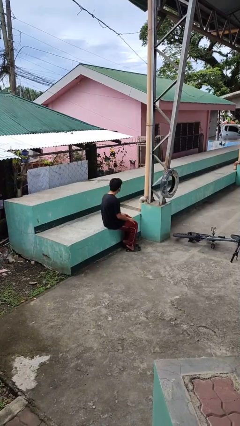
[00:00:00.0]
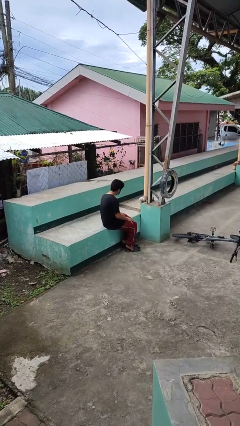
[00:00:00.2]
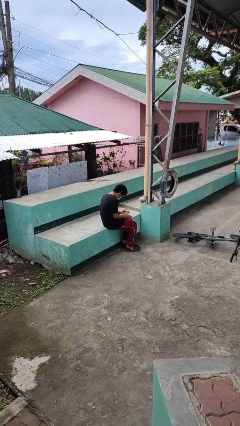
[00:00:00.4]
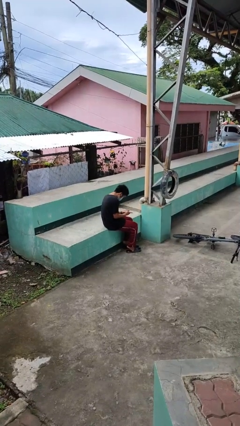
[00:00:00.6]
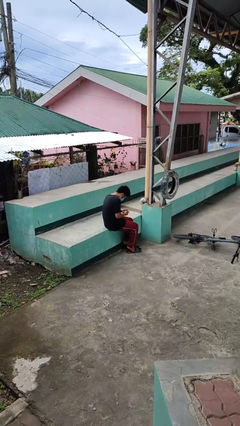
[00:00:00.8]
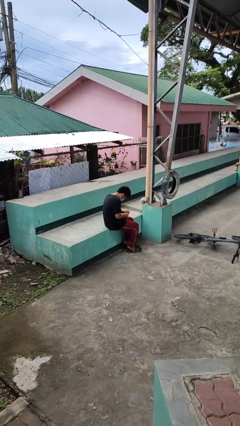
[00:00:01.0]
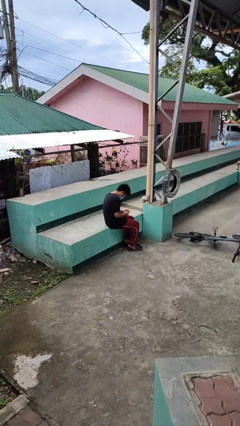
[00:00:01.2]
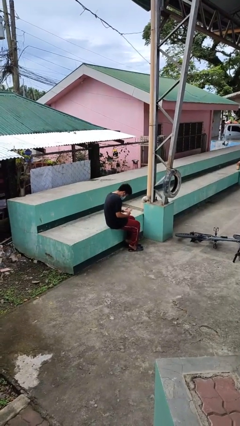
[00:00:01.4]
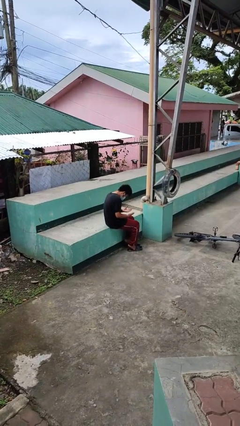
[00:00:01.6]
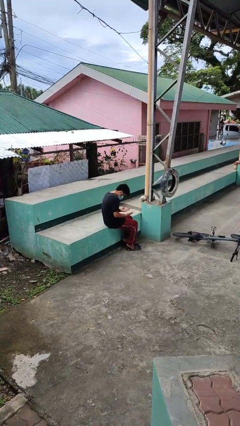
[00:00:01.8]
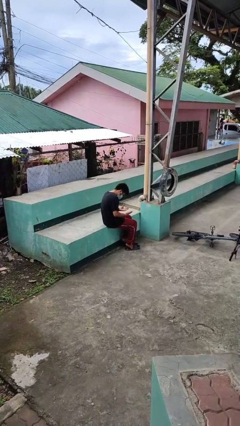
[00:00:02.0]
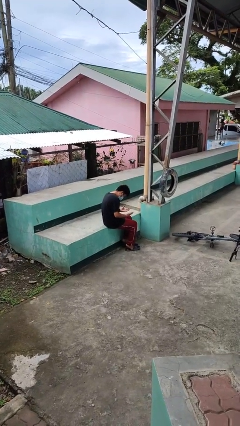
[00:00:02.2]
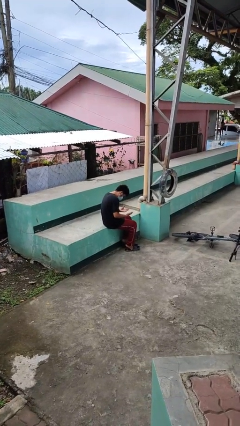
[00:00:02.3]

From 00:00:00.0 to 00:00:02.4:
person looks at hands in lap

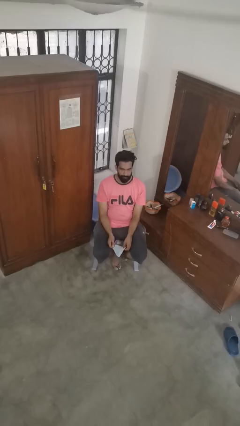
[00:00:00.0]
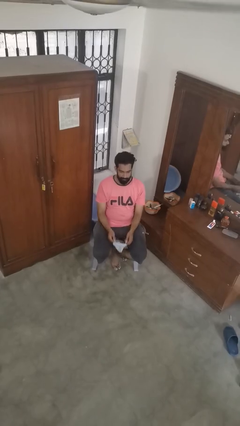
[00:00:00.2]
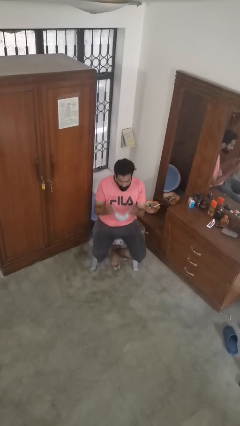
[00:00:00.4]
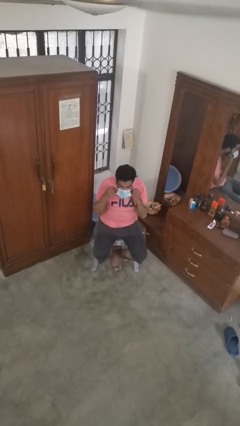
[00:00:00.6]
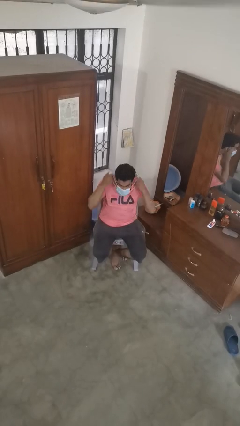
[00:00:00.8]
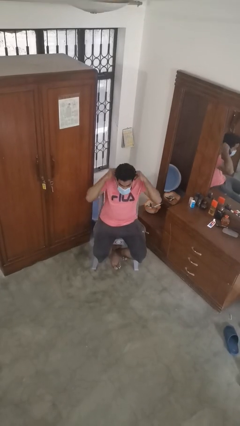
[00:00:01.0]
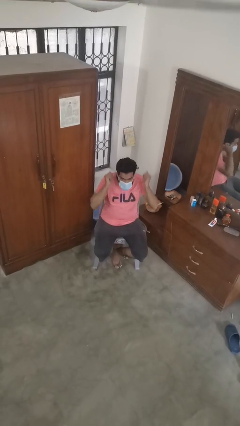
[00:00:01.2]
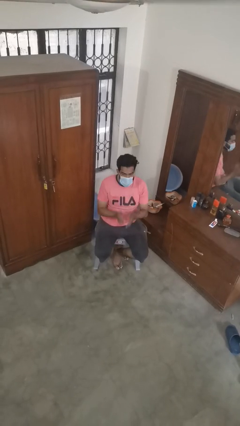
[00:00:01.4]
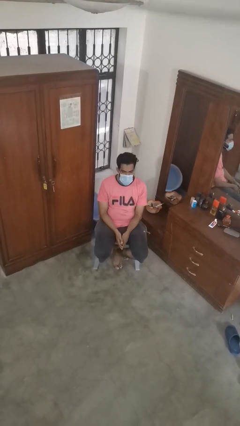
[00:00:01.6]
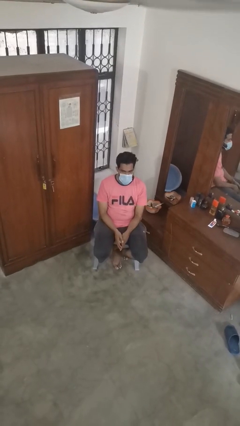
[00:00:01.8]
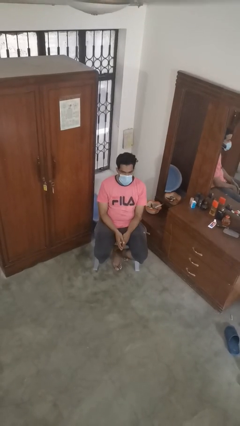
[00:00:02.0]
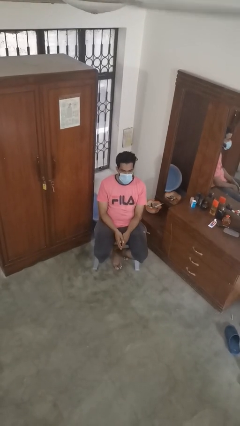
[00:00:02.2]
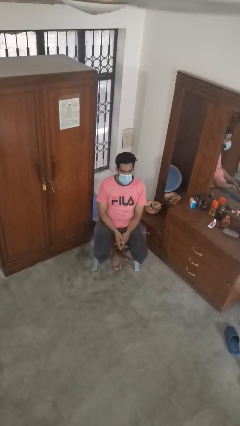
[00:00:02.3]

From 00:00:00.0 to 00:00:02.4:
person puts on facemask

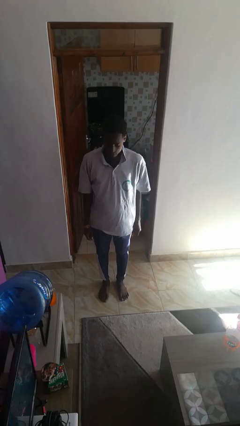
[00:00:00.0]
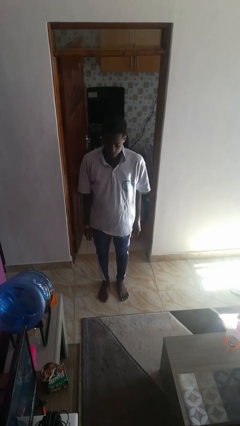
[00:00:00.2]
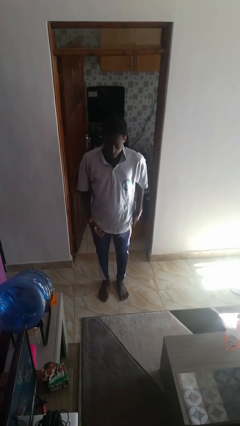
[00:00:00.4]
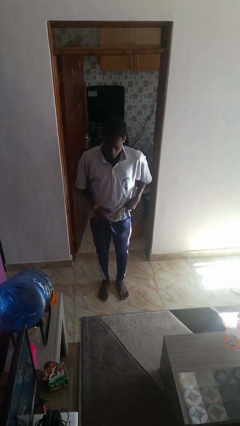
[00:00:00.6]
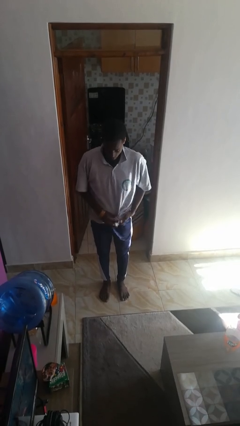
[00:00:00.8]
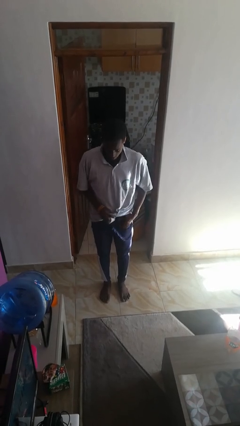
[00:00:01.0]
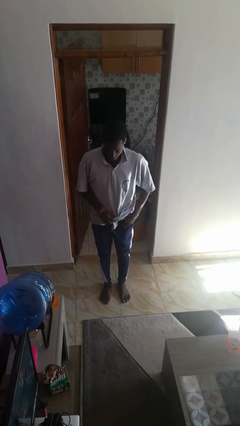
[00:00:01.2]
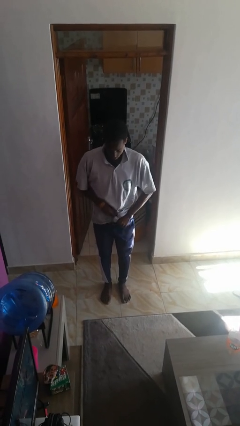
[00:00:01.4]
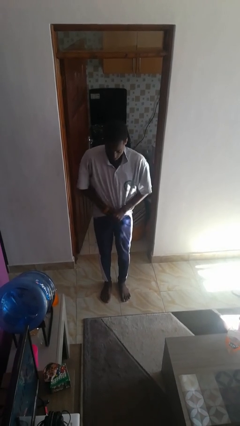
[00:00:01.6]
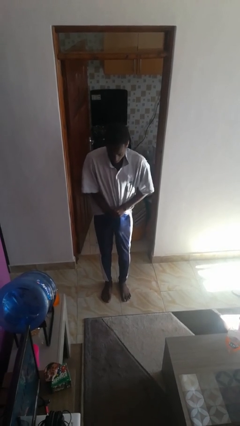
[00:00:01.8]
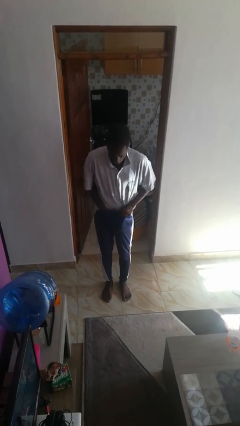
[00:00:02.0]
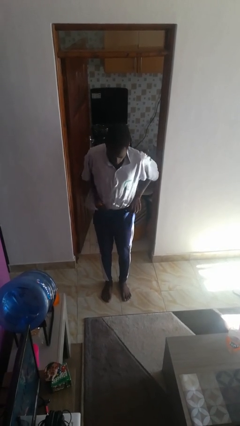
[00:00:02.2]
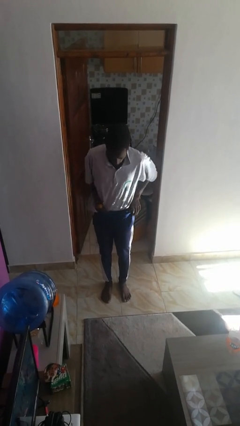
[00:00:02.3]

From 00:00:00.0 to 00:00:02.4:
person tucks in shirt

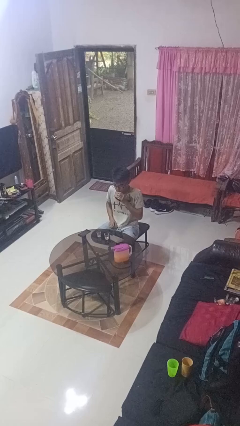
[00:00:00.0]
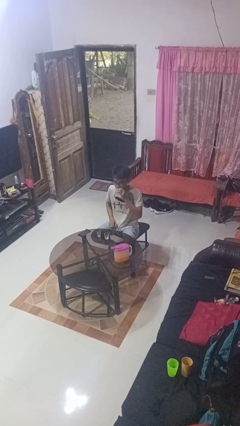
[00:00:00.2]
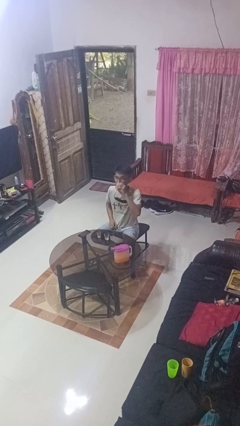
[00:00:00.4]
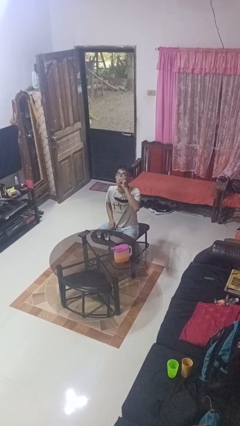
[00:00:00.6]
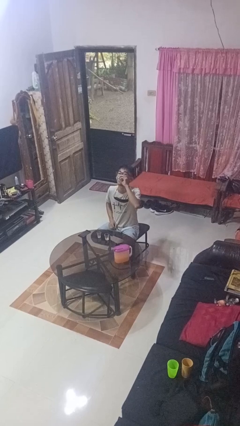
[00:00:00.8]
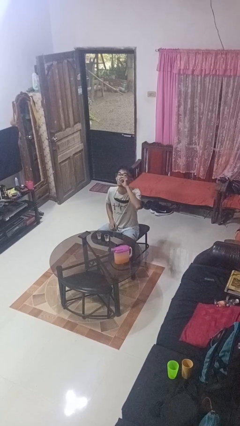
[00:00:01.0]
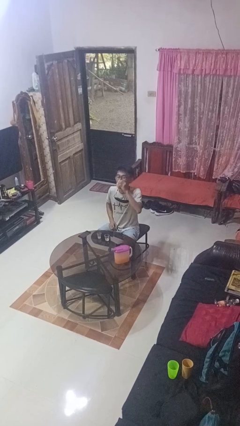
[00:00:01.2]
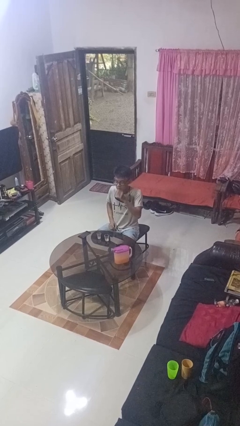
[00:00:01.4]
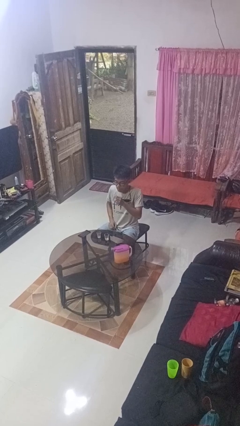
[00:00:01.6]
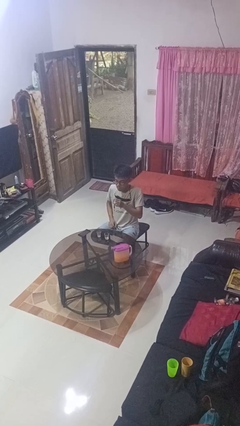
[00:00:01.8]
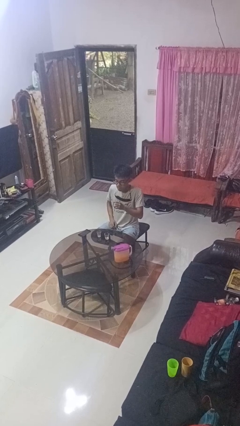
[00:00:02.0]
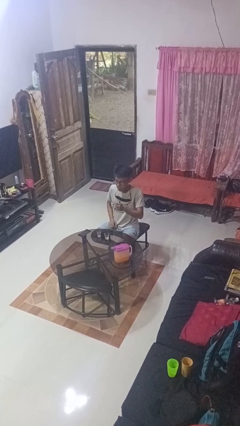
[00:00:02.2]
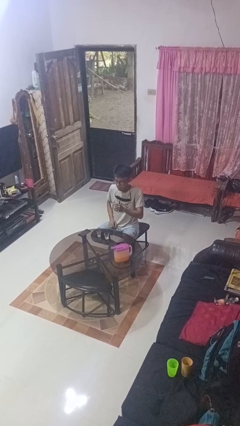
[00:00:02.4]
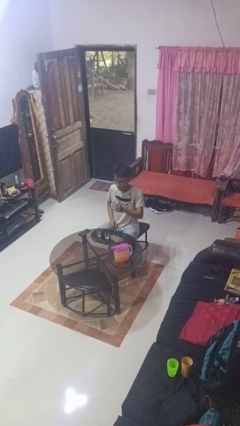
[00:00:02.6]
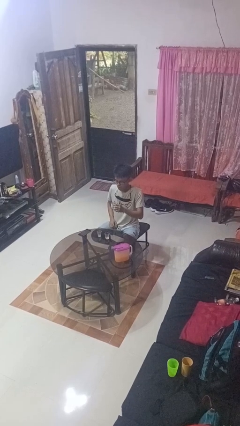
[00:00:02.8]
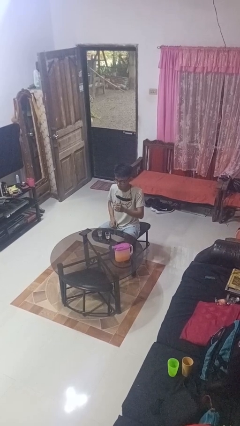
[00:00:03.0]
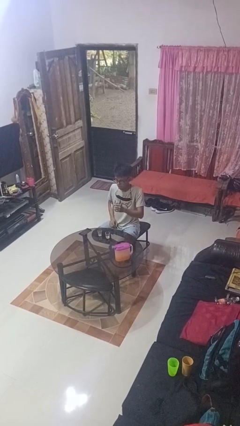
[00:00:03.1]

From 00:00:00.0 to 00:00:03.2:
person drinks from shotglass

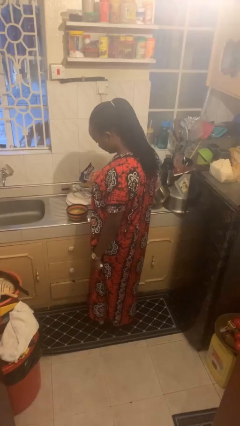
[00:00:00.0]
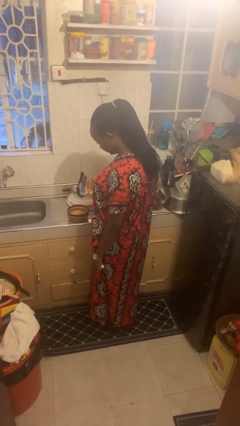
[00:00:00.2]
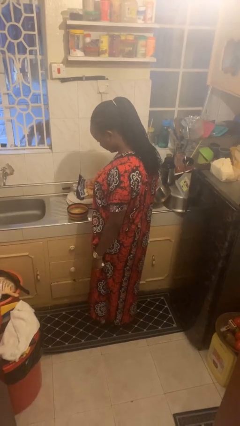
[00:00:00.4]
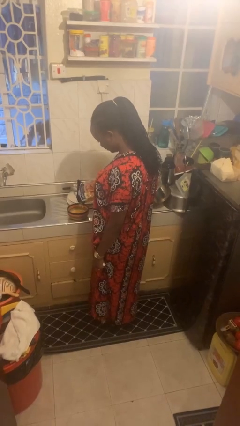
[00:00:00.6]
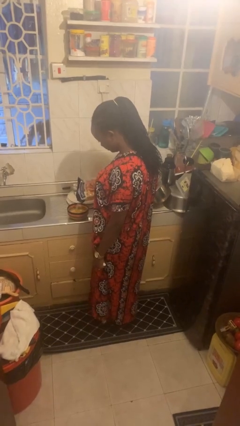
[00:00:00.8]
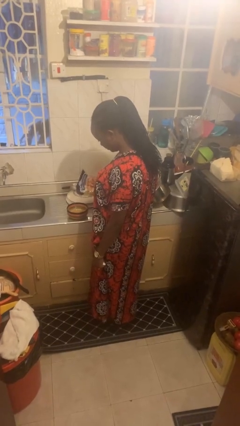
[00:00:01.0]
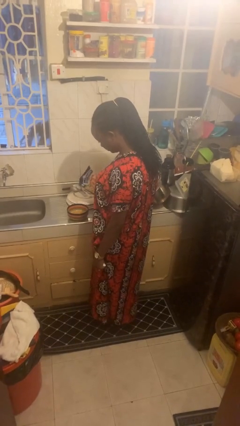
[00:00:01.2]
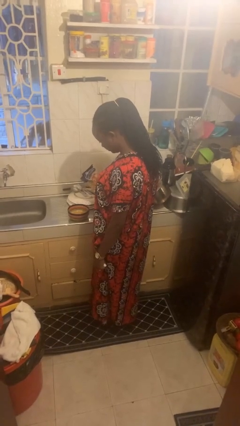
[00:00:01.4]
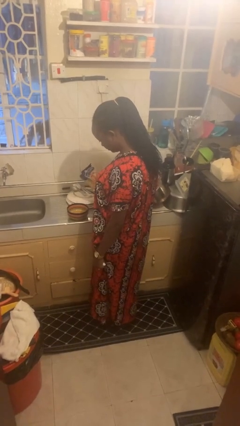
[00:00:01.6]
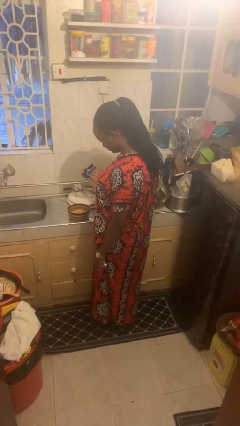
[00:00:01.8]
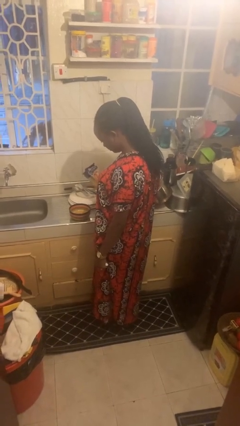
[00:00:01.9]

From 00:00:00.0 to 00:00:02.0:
person pours into bowl

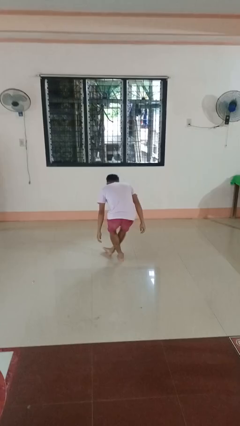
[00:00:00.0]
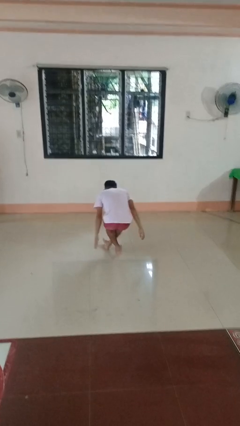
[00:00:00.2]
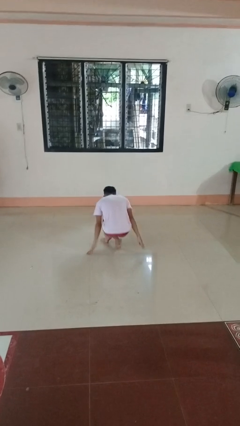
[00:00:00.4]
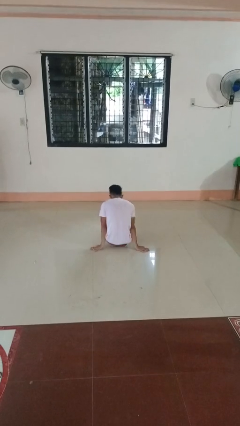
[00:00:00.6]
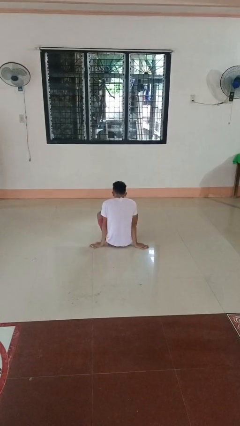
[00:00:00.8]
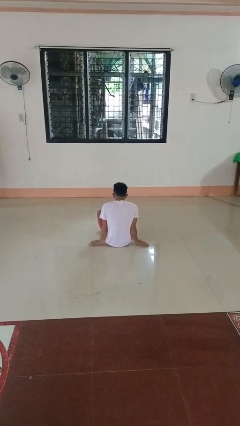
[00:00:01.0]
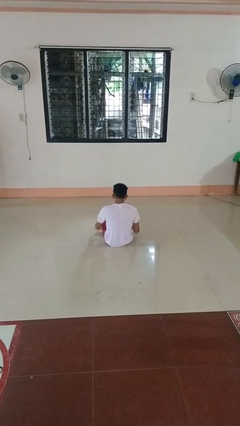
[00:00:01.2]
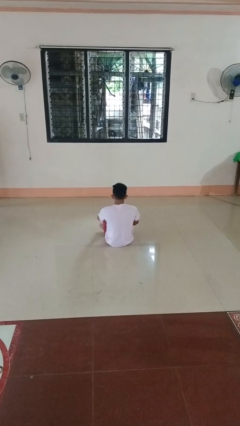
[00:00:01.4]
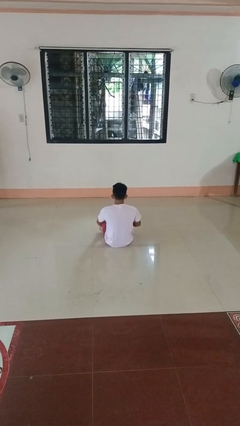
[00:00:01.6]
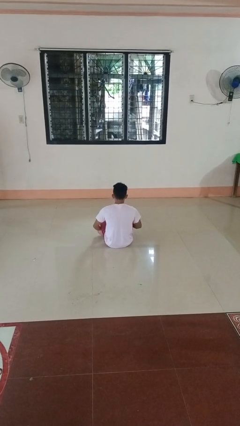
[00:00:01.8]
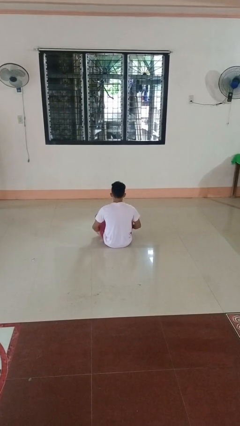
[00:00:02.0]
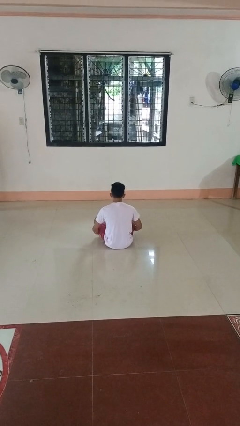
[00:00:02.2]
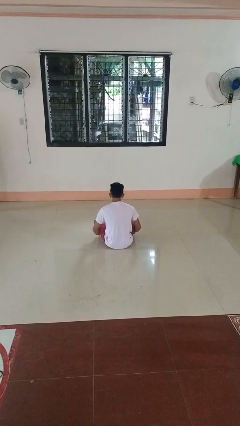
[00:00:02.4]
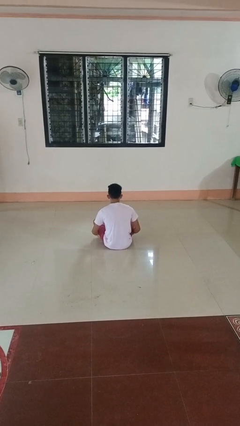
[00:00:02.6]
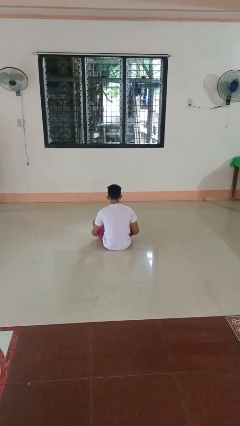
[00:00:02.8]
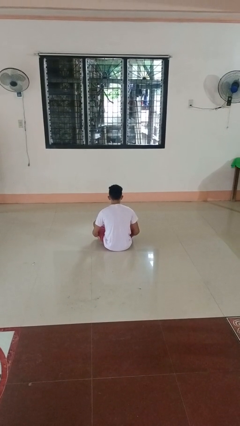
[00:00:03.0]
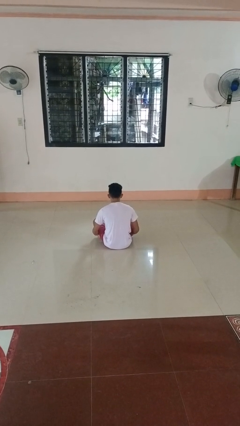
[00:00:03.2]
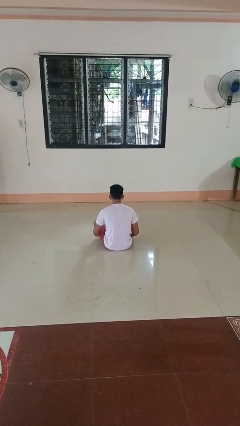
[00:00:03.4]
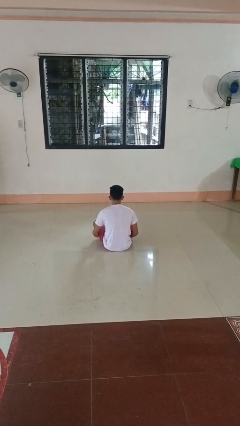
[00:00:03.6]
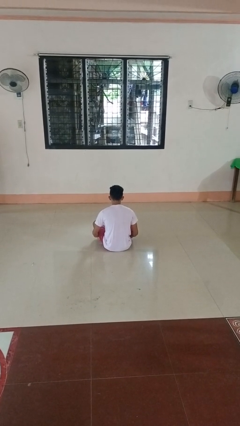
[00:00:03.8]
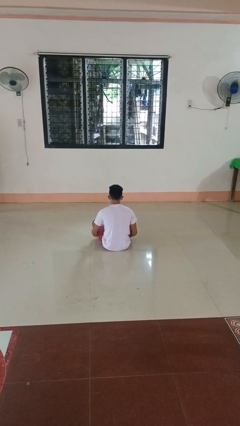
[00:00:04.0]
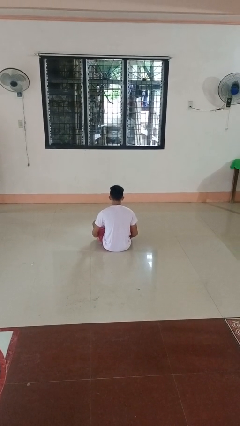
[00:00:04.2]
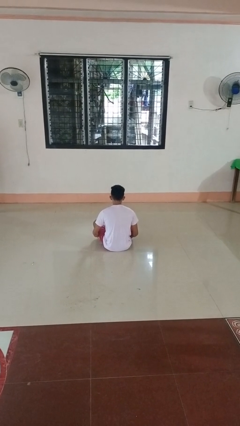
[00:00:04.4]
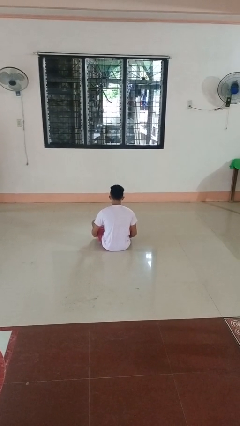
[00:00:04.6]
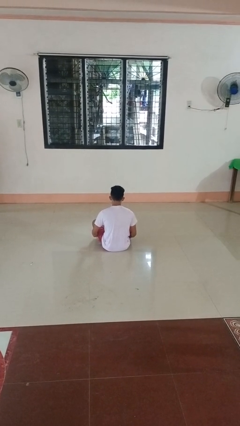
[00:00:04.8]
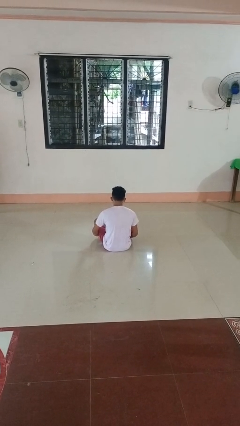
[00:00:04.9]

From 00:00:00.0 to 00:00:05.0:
person sits crisscross
